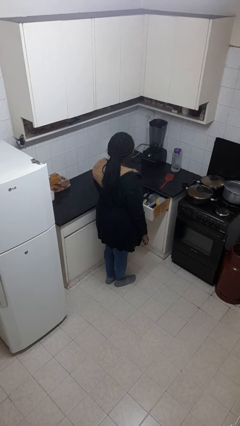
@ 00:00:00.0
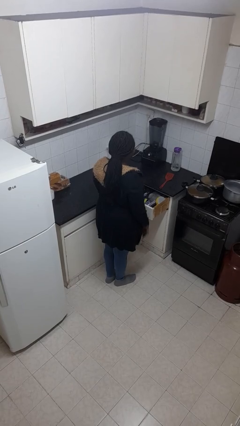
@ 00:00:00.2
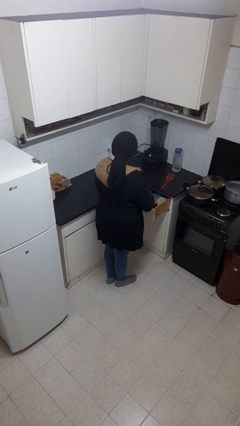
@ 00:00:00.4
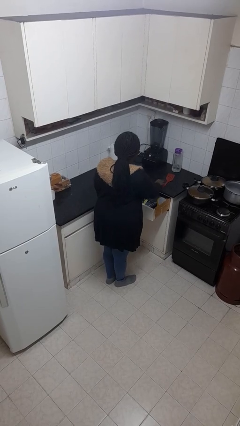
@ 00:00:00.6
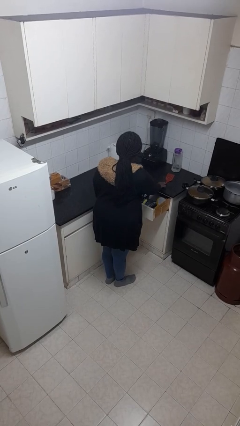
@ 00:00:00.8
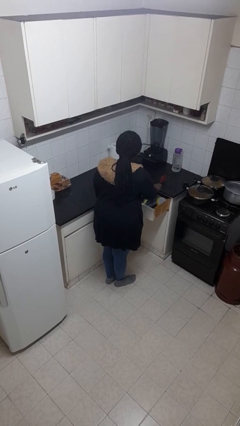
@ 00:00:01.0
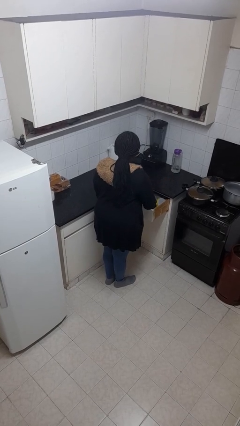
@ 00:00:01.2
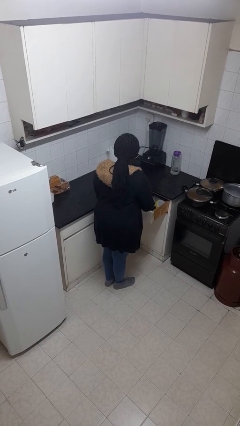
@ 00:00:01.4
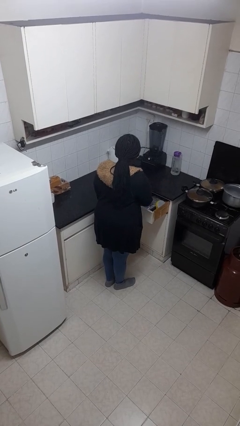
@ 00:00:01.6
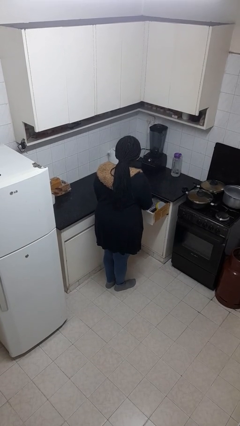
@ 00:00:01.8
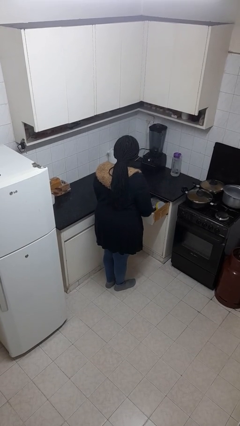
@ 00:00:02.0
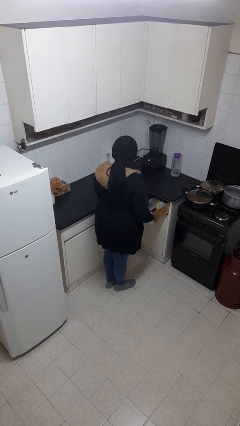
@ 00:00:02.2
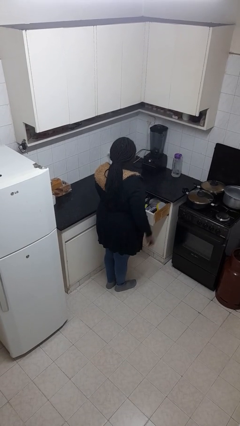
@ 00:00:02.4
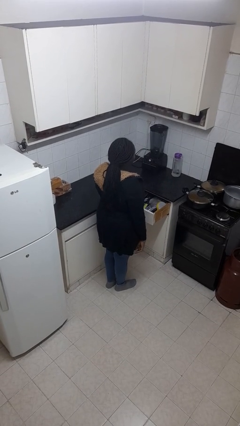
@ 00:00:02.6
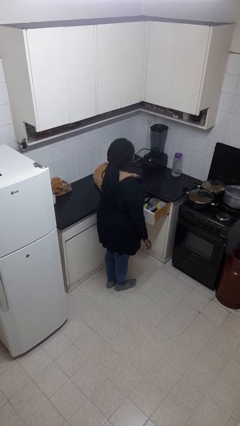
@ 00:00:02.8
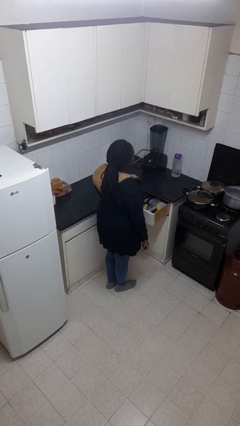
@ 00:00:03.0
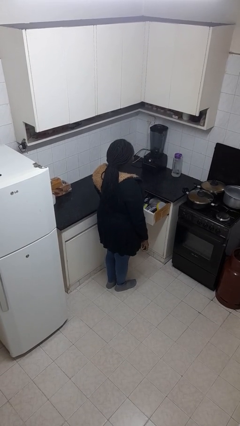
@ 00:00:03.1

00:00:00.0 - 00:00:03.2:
person puts object into kitchen drawer

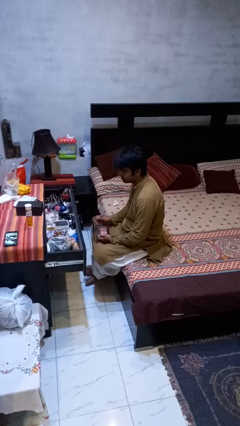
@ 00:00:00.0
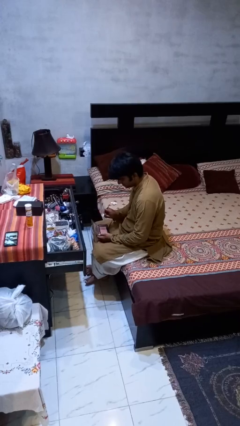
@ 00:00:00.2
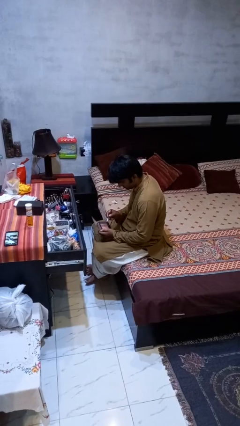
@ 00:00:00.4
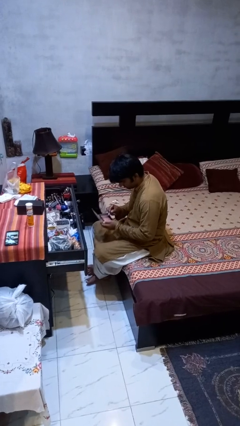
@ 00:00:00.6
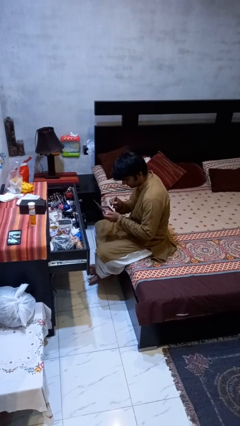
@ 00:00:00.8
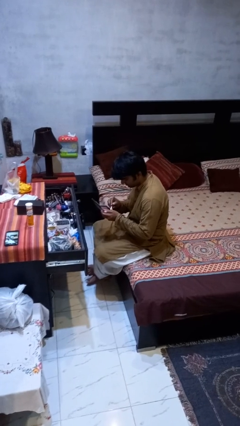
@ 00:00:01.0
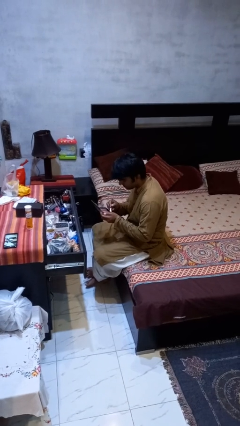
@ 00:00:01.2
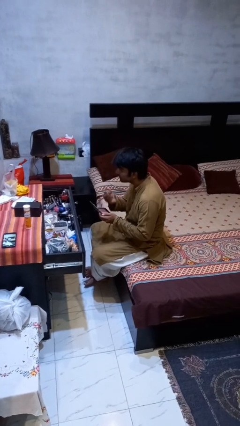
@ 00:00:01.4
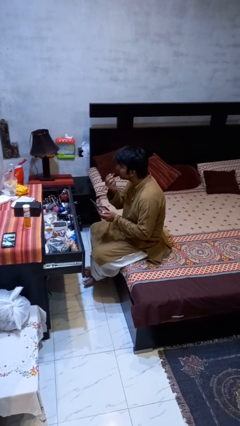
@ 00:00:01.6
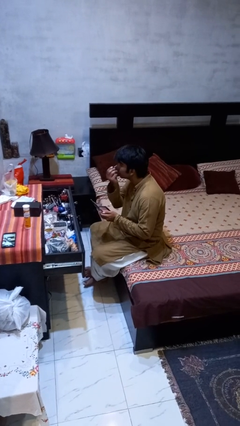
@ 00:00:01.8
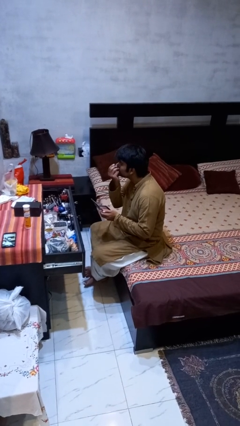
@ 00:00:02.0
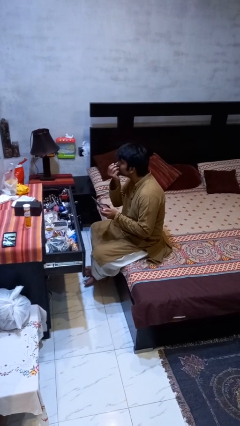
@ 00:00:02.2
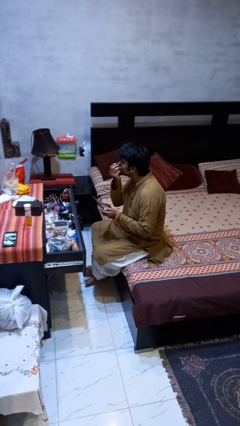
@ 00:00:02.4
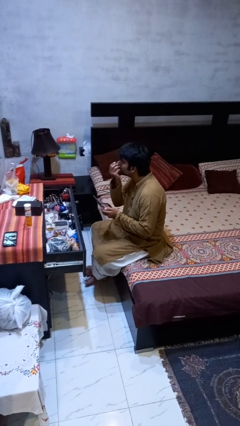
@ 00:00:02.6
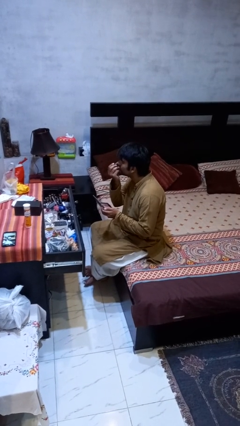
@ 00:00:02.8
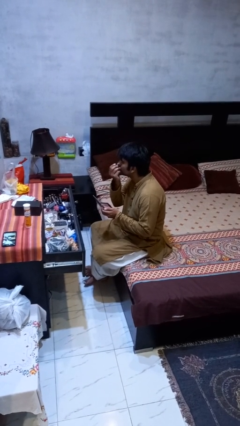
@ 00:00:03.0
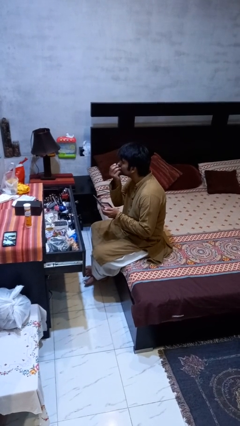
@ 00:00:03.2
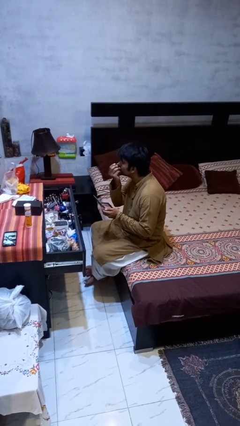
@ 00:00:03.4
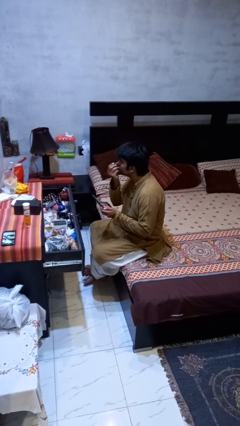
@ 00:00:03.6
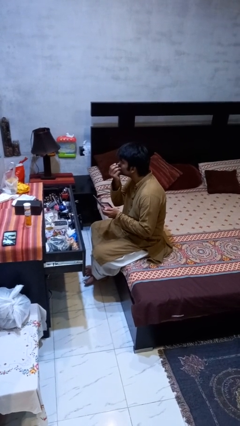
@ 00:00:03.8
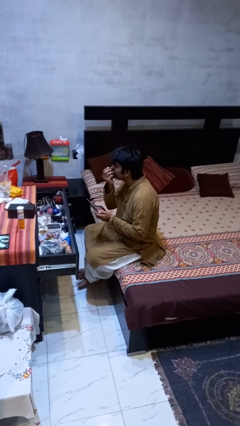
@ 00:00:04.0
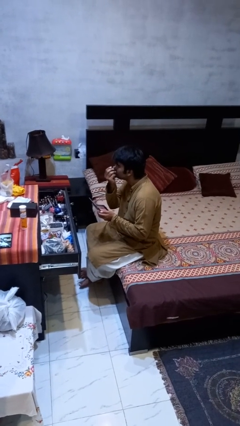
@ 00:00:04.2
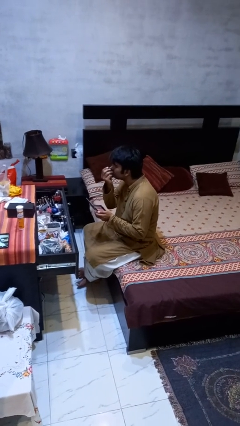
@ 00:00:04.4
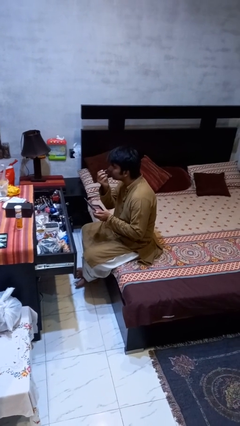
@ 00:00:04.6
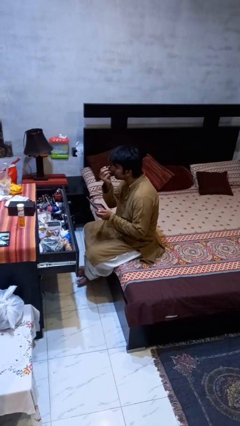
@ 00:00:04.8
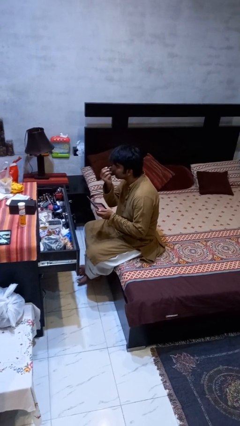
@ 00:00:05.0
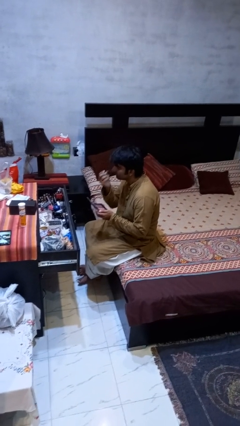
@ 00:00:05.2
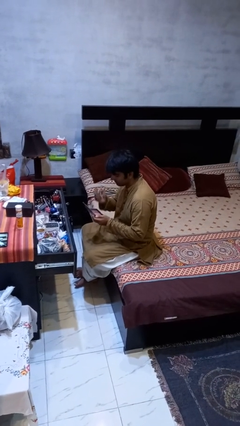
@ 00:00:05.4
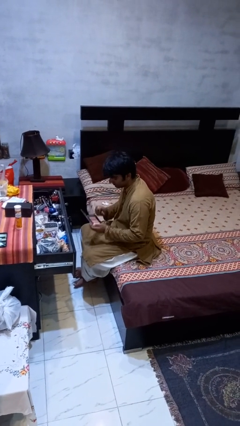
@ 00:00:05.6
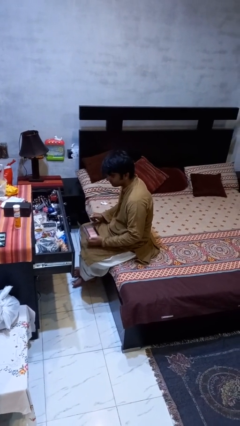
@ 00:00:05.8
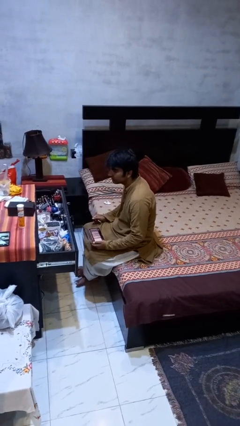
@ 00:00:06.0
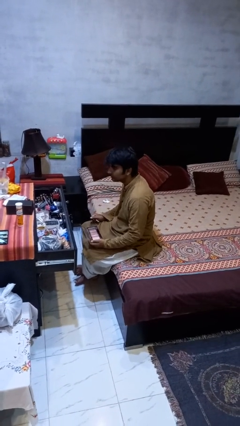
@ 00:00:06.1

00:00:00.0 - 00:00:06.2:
person applies eye makeup

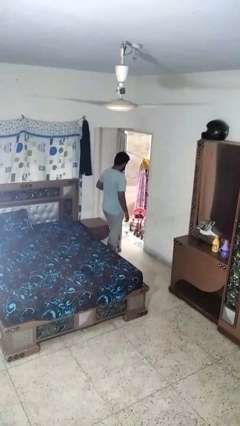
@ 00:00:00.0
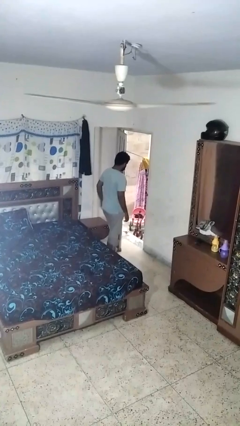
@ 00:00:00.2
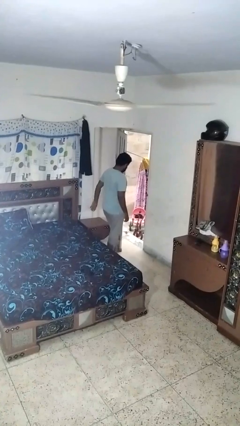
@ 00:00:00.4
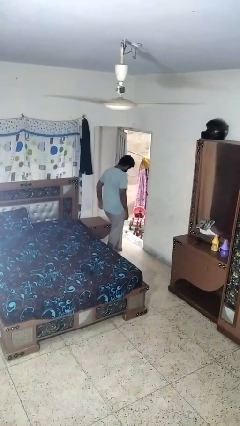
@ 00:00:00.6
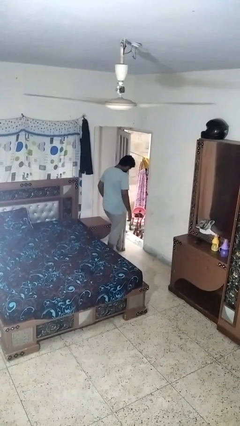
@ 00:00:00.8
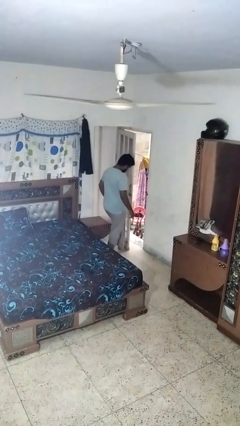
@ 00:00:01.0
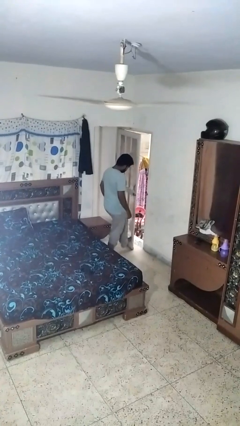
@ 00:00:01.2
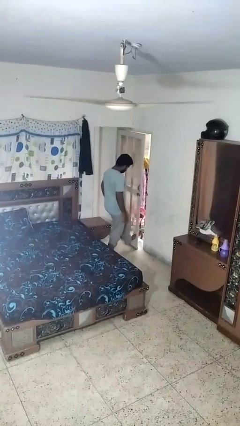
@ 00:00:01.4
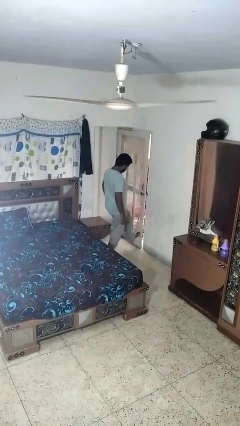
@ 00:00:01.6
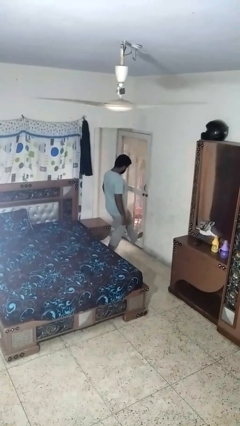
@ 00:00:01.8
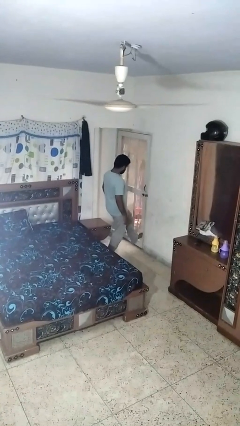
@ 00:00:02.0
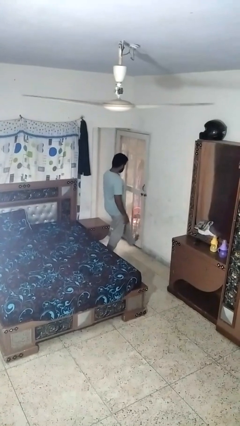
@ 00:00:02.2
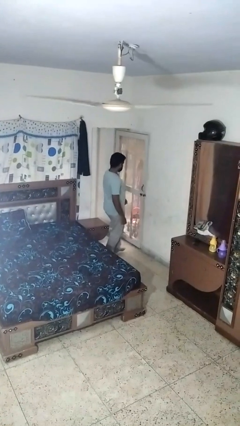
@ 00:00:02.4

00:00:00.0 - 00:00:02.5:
person closes door with foot

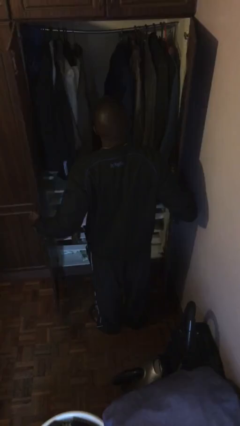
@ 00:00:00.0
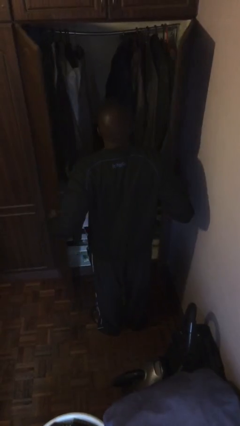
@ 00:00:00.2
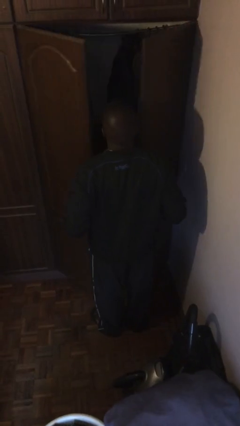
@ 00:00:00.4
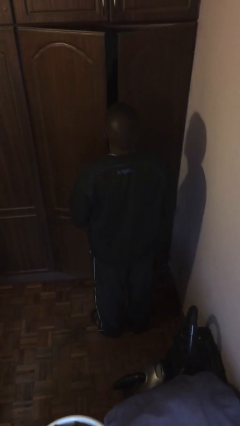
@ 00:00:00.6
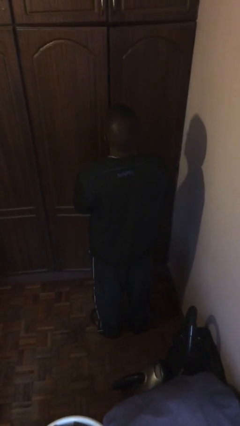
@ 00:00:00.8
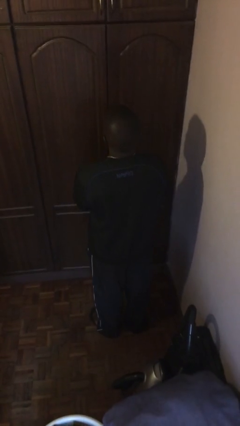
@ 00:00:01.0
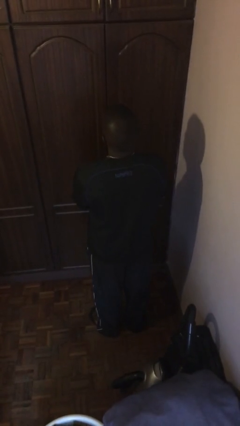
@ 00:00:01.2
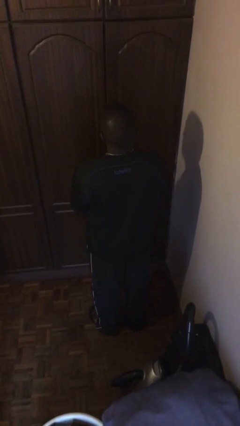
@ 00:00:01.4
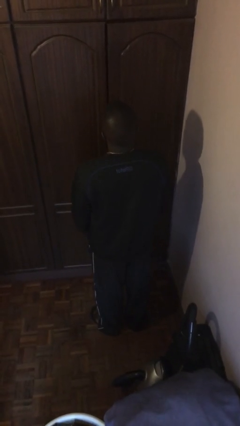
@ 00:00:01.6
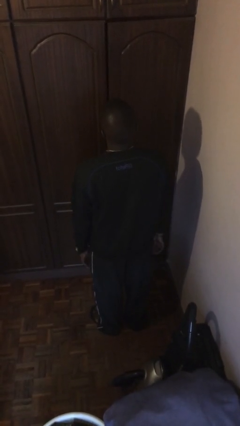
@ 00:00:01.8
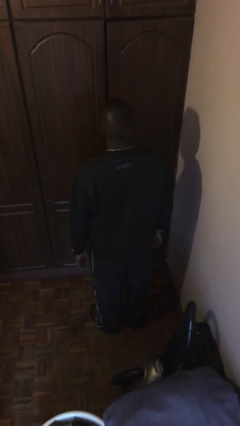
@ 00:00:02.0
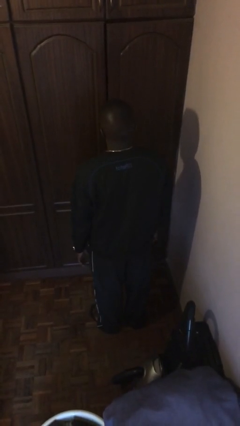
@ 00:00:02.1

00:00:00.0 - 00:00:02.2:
person closes closet door

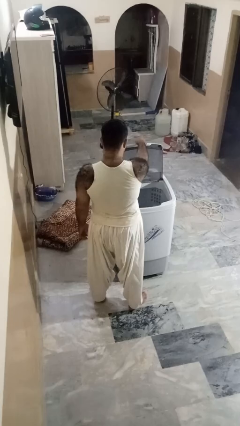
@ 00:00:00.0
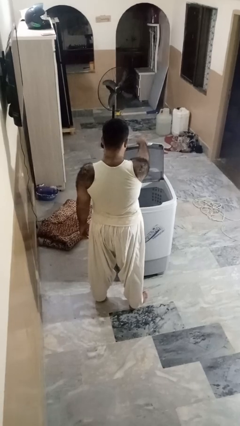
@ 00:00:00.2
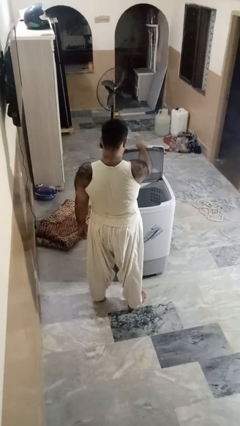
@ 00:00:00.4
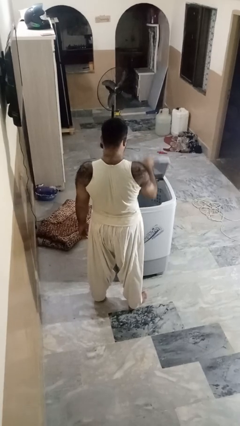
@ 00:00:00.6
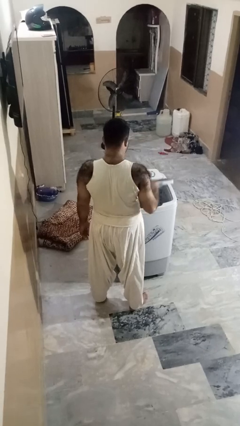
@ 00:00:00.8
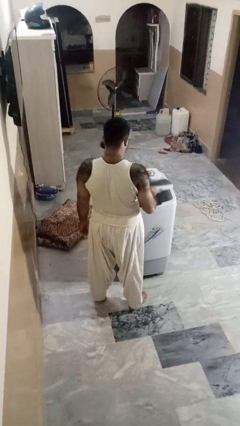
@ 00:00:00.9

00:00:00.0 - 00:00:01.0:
person closes clothes washer

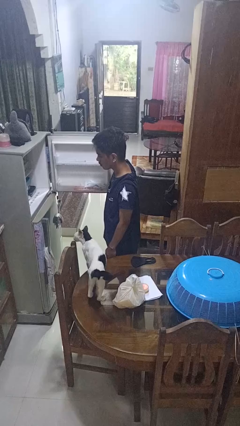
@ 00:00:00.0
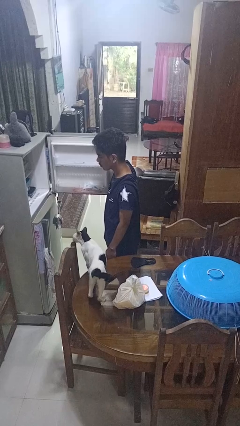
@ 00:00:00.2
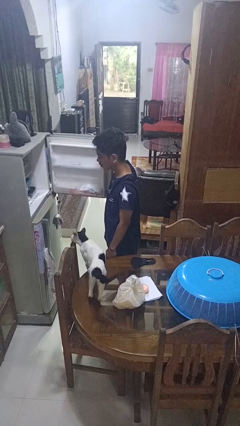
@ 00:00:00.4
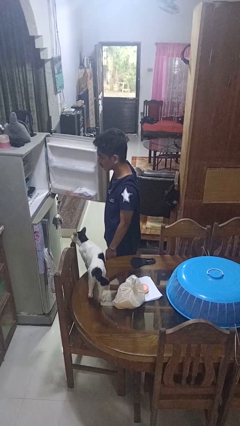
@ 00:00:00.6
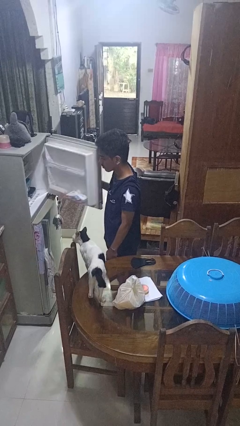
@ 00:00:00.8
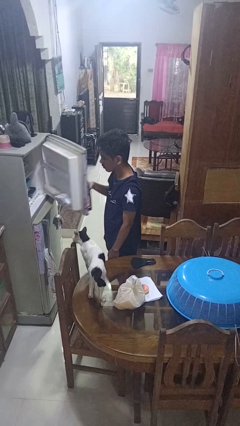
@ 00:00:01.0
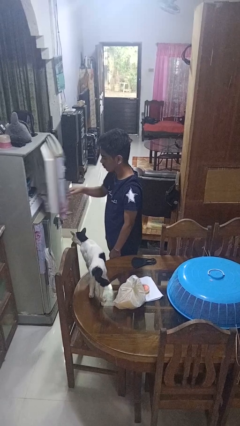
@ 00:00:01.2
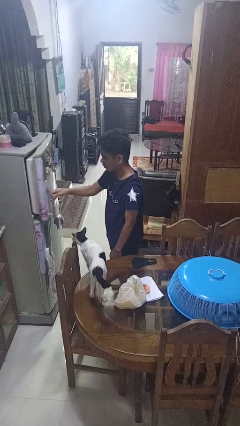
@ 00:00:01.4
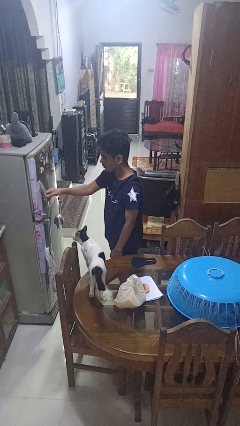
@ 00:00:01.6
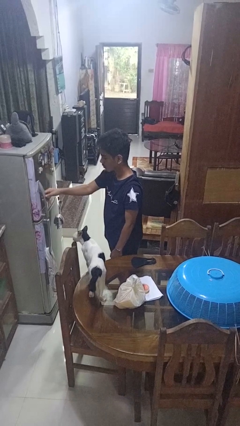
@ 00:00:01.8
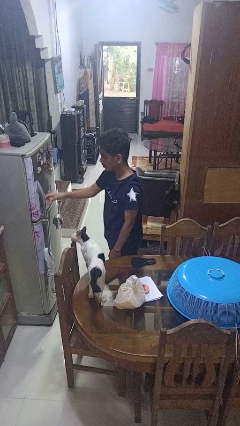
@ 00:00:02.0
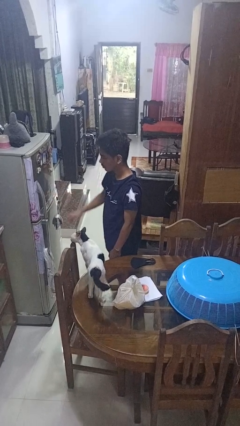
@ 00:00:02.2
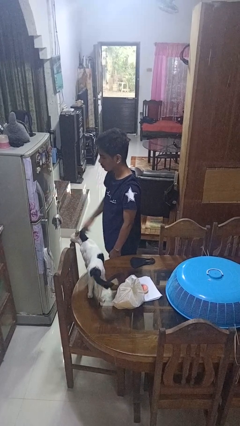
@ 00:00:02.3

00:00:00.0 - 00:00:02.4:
person closes refrigerator
